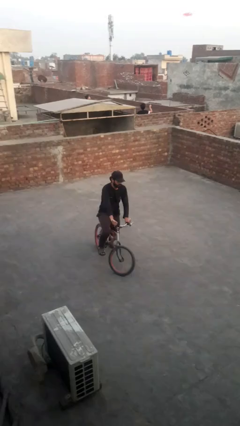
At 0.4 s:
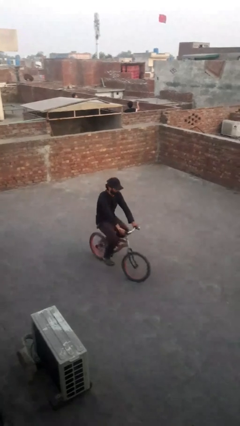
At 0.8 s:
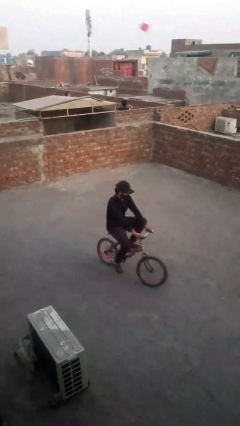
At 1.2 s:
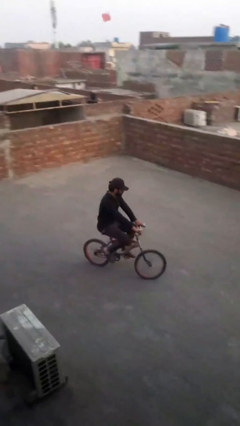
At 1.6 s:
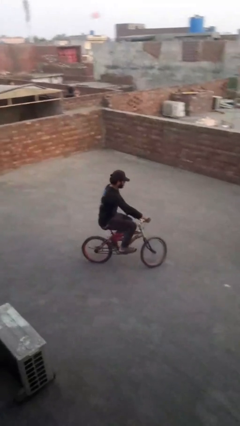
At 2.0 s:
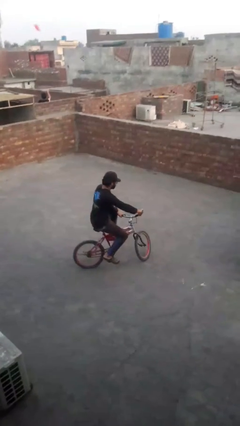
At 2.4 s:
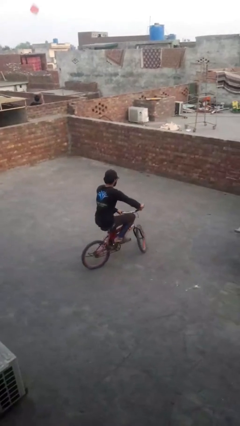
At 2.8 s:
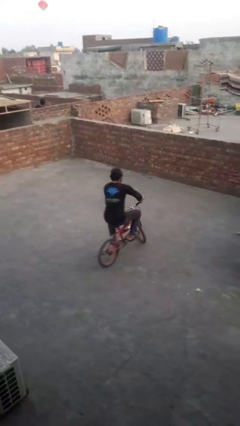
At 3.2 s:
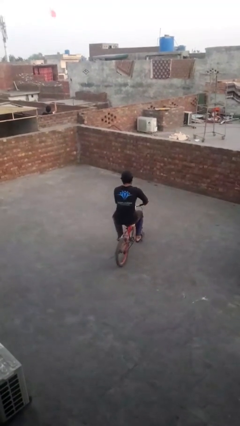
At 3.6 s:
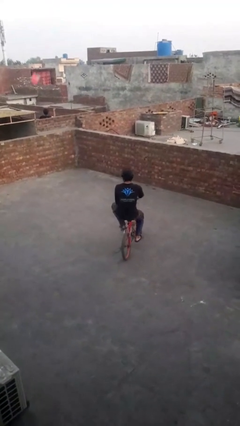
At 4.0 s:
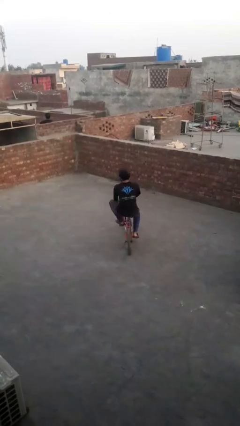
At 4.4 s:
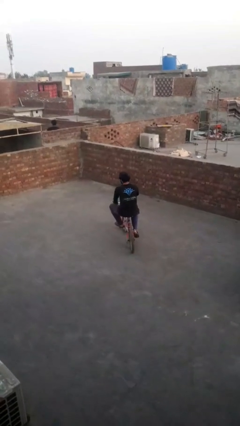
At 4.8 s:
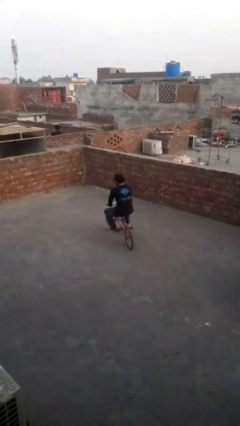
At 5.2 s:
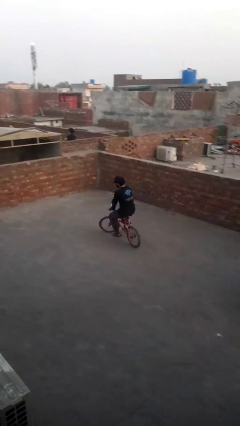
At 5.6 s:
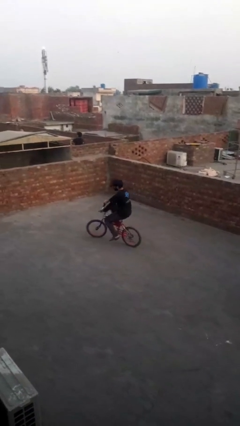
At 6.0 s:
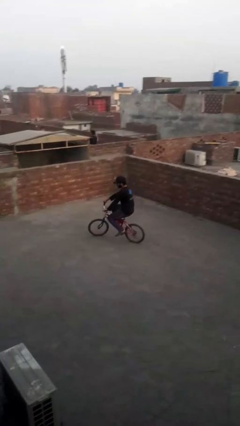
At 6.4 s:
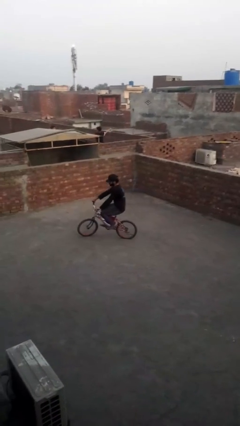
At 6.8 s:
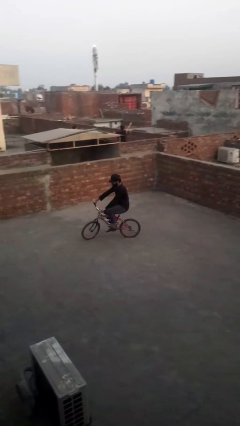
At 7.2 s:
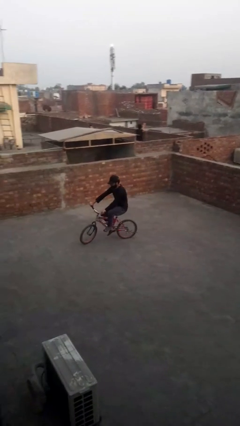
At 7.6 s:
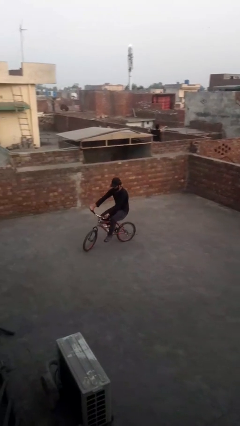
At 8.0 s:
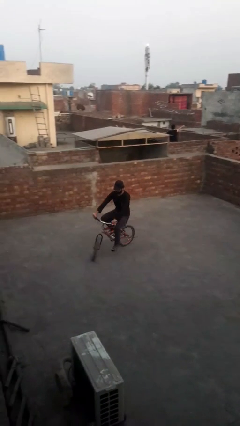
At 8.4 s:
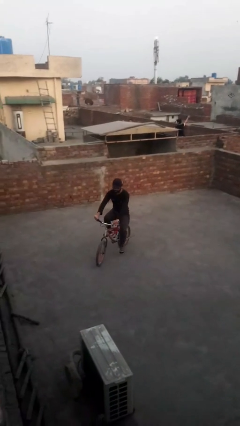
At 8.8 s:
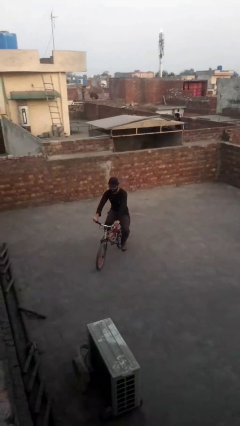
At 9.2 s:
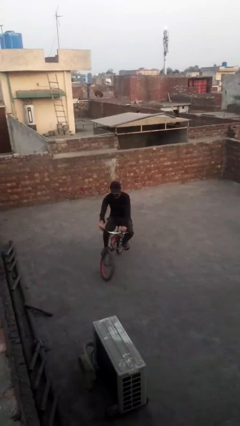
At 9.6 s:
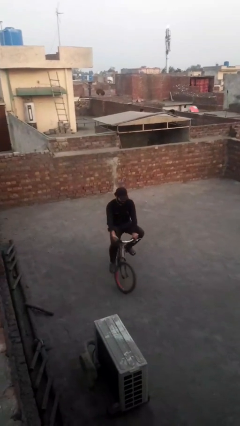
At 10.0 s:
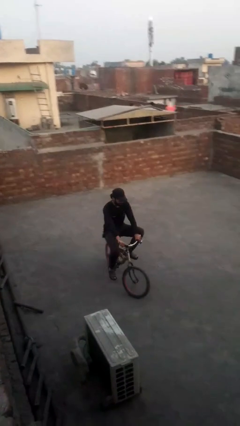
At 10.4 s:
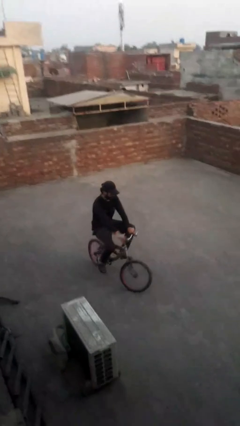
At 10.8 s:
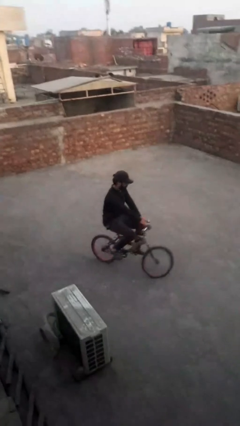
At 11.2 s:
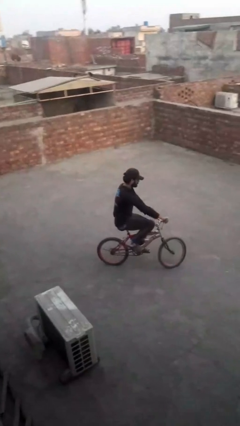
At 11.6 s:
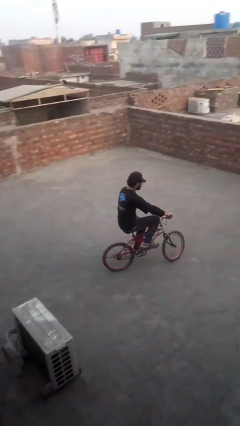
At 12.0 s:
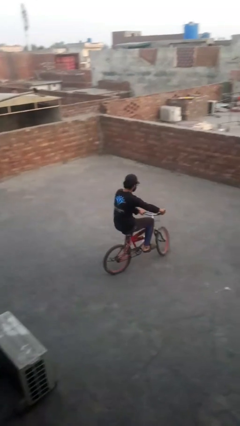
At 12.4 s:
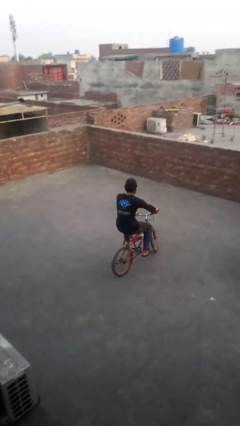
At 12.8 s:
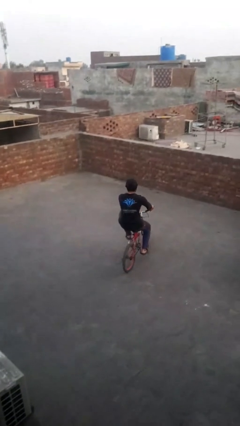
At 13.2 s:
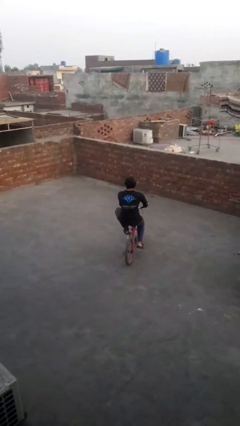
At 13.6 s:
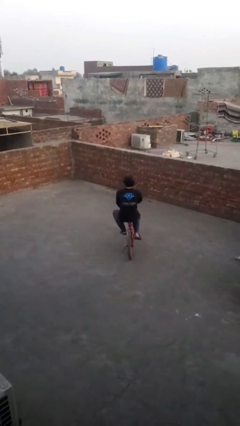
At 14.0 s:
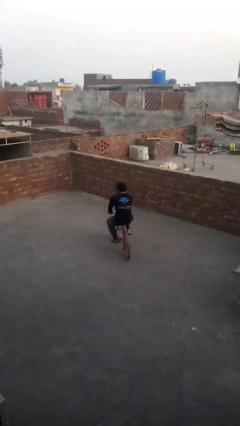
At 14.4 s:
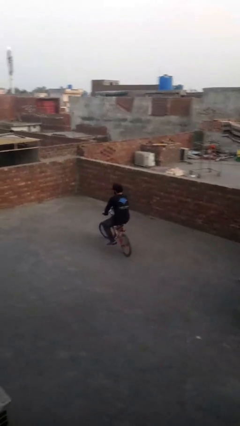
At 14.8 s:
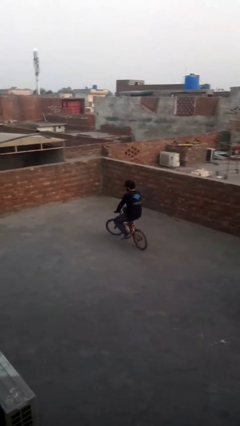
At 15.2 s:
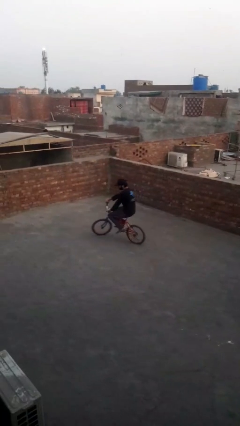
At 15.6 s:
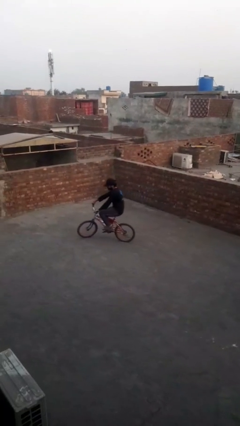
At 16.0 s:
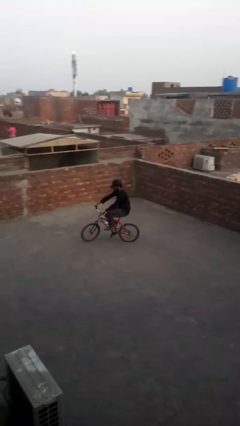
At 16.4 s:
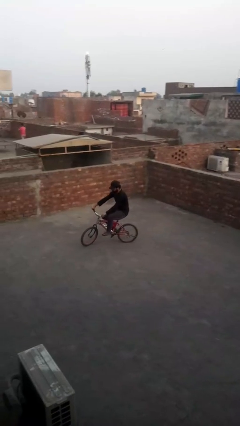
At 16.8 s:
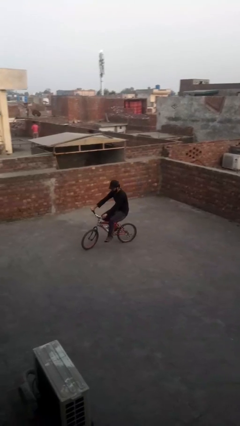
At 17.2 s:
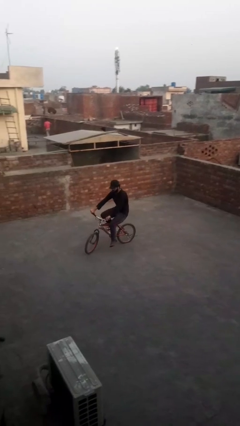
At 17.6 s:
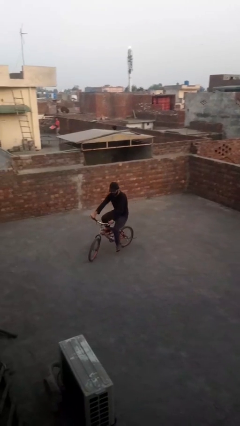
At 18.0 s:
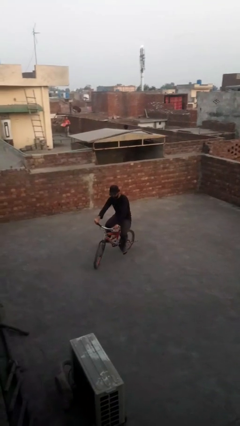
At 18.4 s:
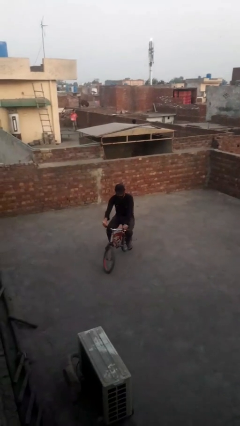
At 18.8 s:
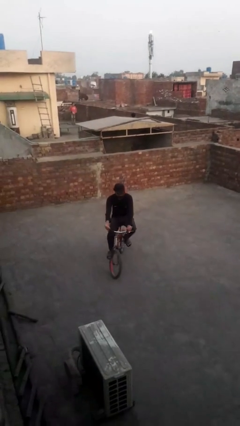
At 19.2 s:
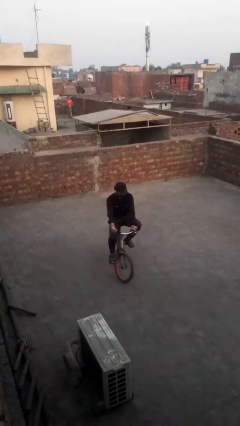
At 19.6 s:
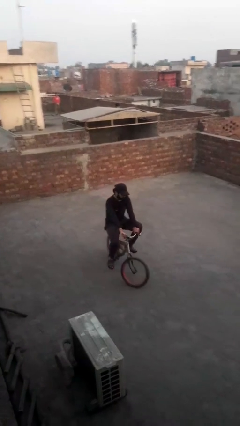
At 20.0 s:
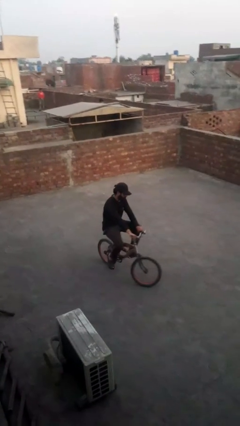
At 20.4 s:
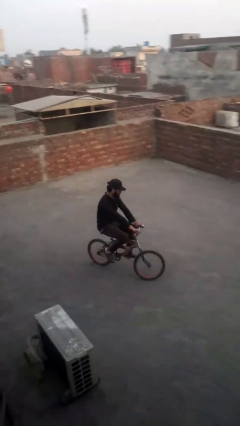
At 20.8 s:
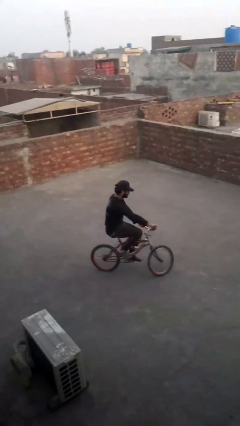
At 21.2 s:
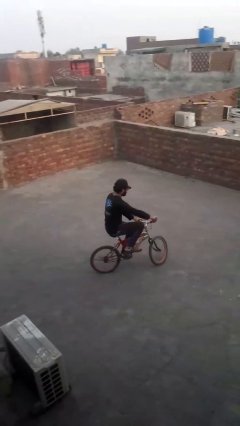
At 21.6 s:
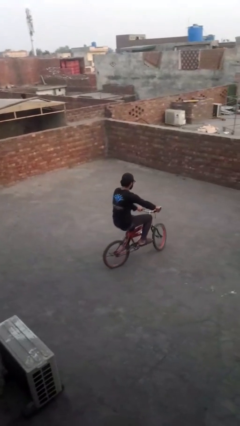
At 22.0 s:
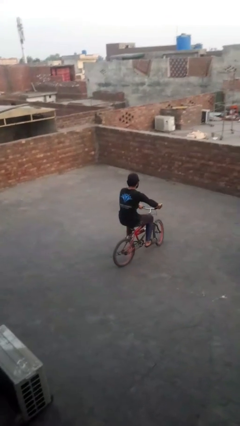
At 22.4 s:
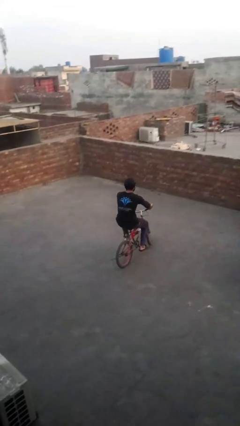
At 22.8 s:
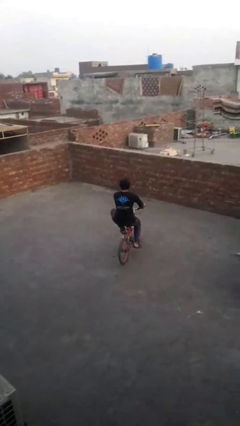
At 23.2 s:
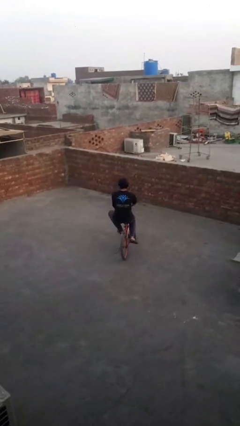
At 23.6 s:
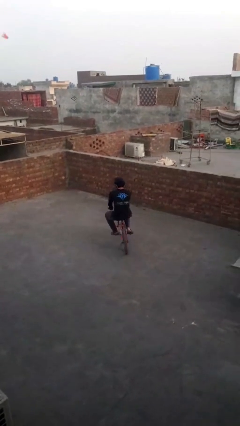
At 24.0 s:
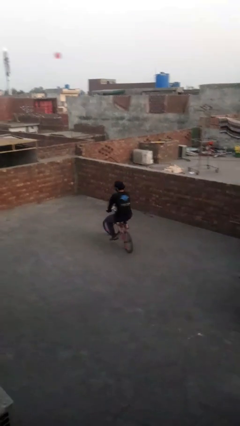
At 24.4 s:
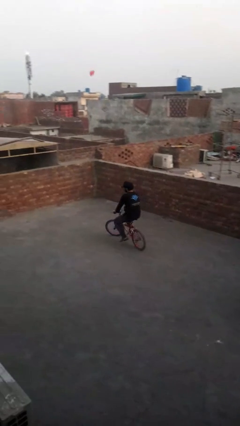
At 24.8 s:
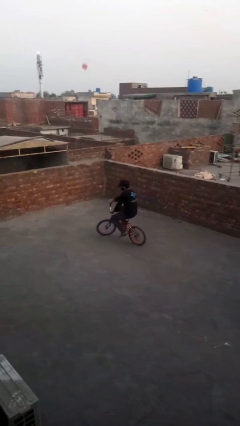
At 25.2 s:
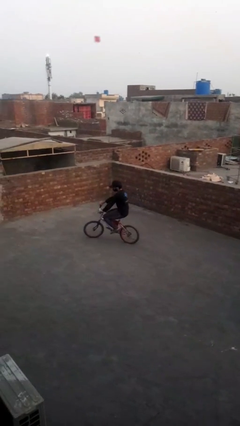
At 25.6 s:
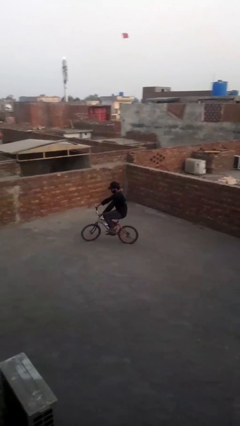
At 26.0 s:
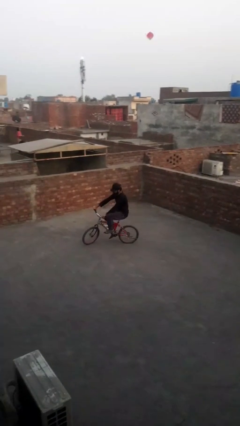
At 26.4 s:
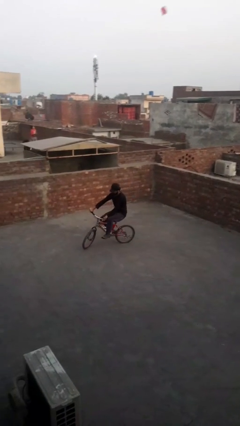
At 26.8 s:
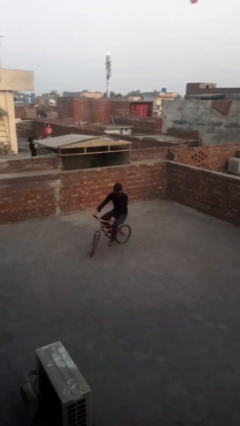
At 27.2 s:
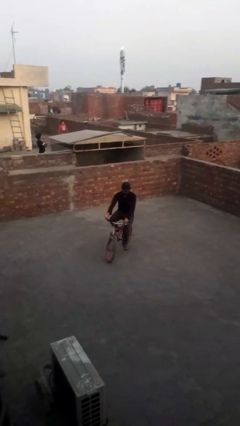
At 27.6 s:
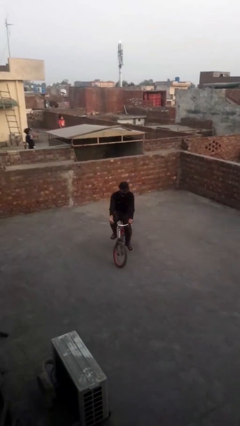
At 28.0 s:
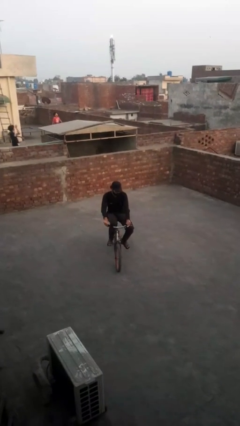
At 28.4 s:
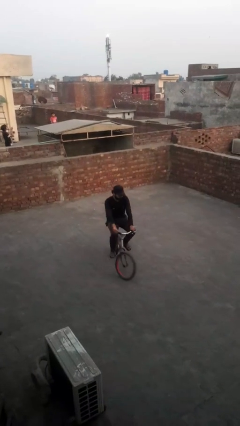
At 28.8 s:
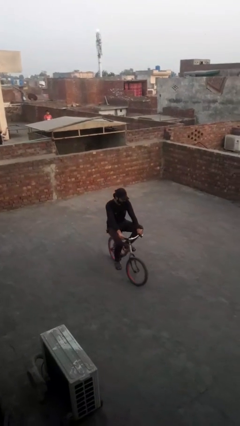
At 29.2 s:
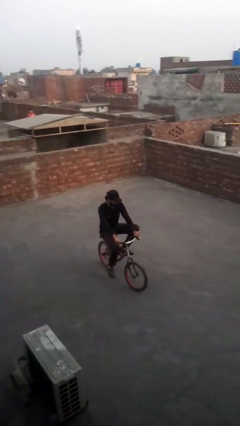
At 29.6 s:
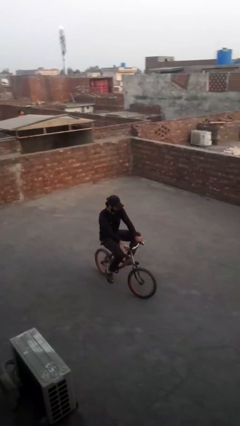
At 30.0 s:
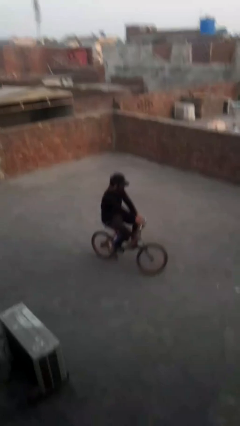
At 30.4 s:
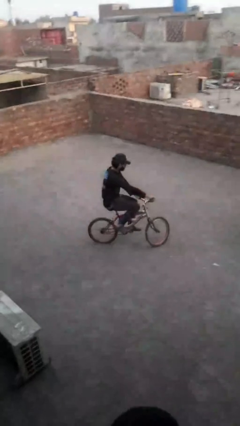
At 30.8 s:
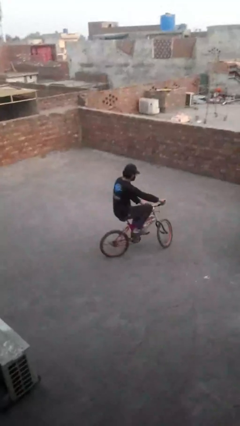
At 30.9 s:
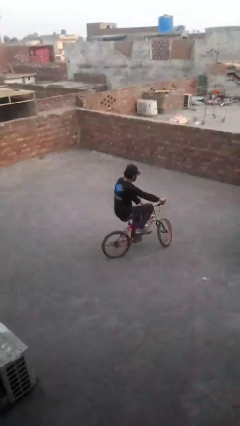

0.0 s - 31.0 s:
person rides bicycle

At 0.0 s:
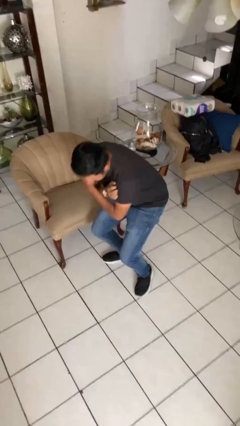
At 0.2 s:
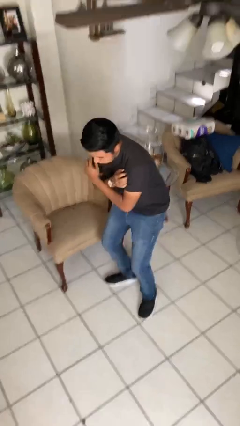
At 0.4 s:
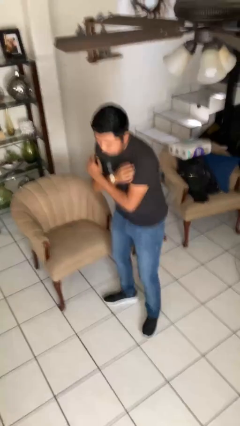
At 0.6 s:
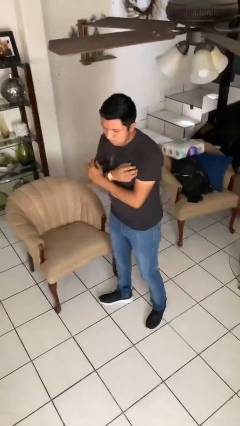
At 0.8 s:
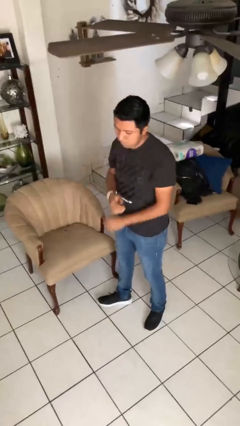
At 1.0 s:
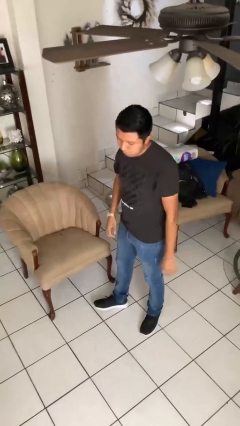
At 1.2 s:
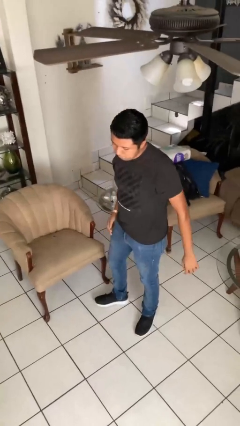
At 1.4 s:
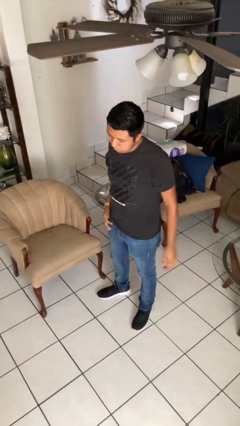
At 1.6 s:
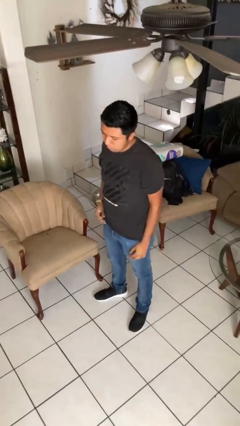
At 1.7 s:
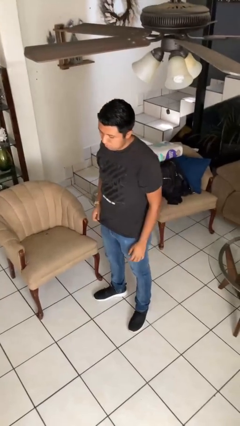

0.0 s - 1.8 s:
person stands up

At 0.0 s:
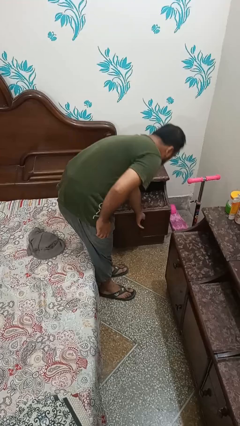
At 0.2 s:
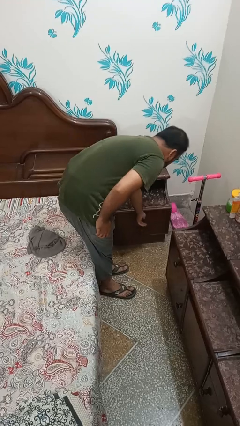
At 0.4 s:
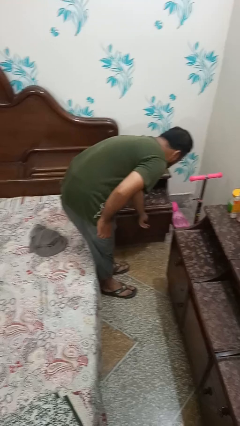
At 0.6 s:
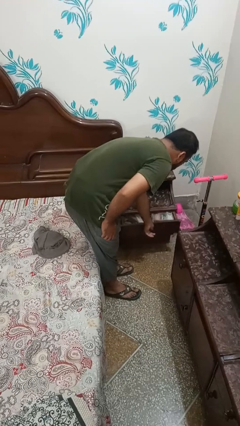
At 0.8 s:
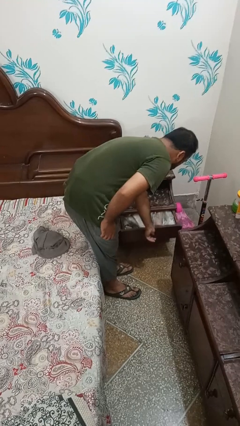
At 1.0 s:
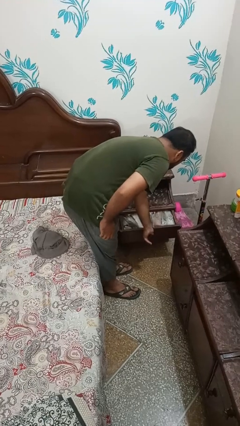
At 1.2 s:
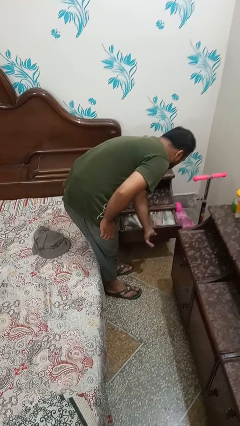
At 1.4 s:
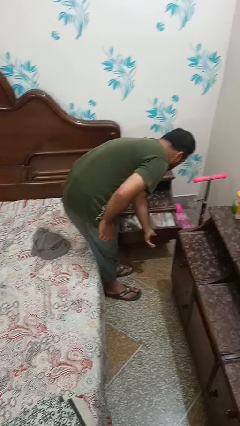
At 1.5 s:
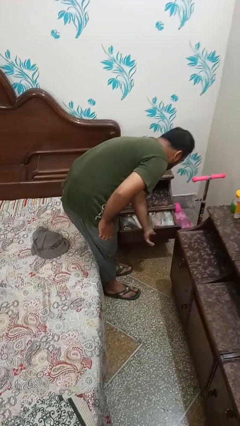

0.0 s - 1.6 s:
person opens dresser drawer
